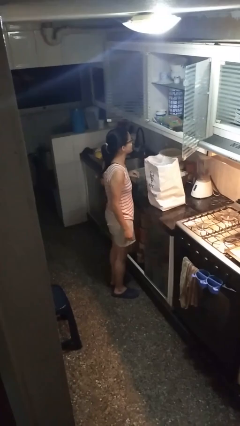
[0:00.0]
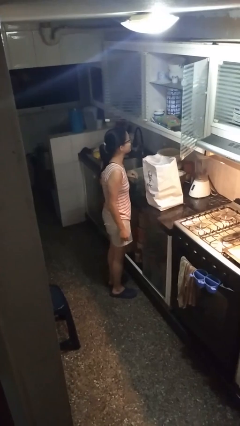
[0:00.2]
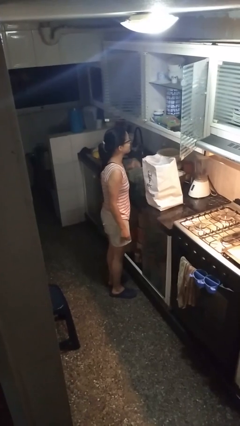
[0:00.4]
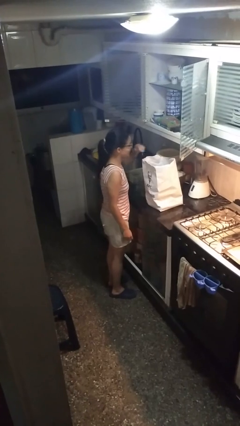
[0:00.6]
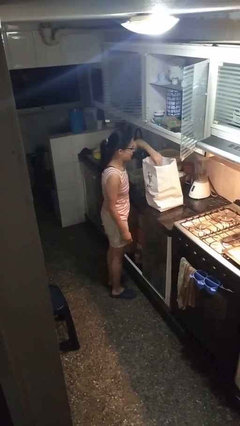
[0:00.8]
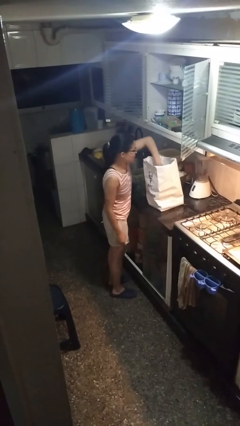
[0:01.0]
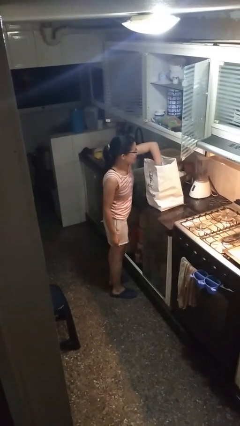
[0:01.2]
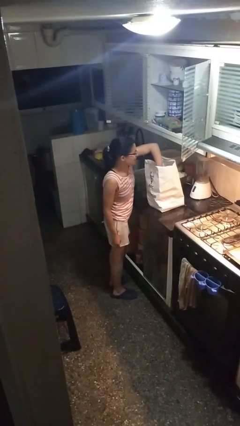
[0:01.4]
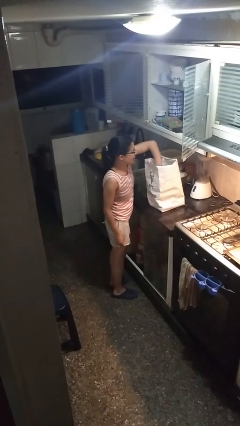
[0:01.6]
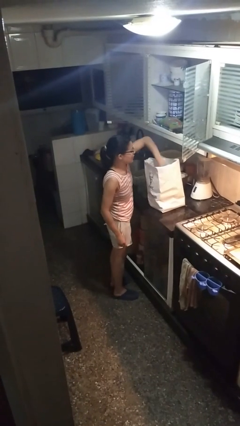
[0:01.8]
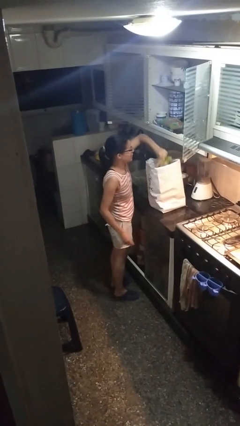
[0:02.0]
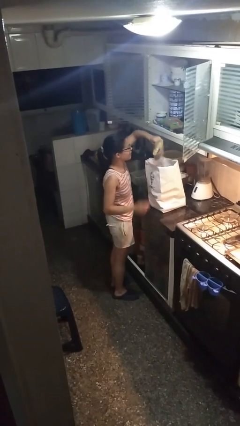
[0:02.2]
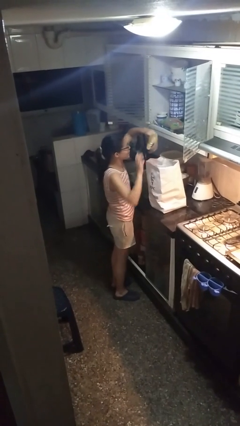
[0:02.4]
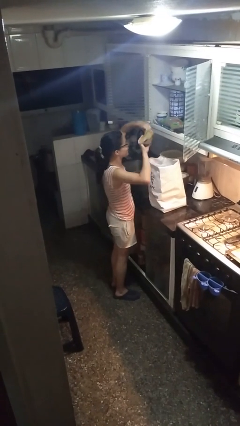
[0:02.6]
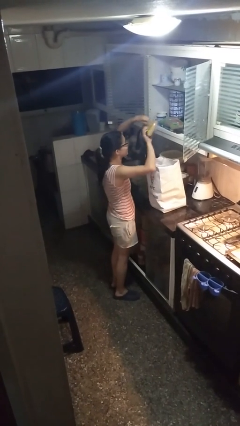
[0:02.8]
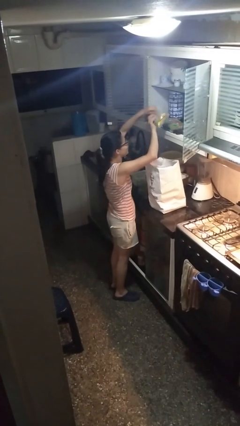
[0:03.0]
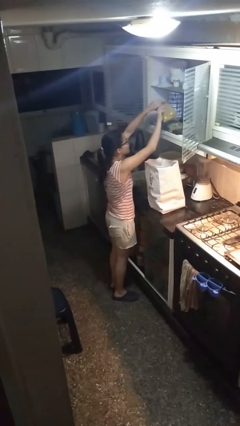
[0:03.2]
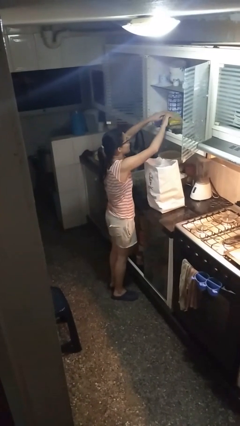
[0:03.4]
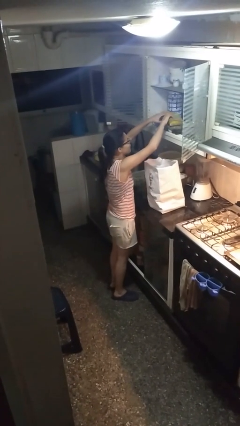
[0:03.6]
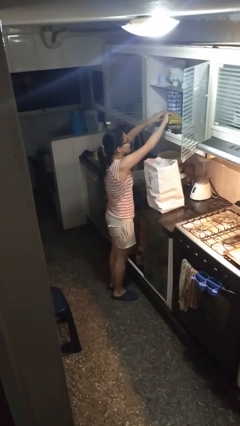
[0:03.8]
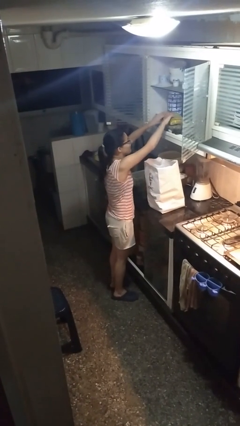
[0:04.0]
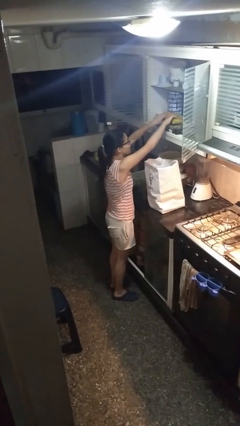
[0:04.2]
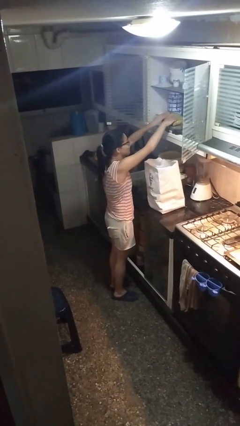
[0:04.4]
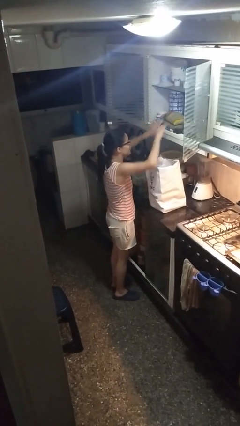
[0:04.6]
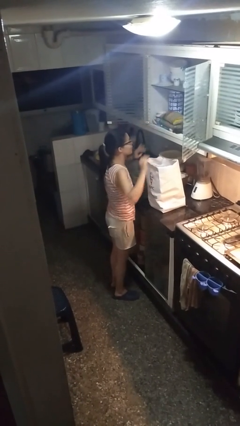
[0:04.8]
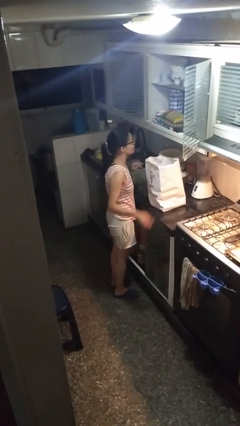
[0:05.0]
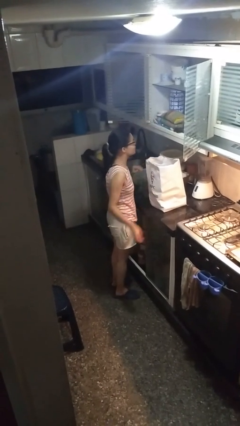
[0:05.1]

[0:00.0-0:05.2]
person loads groceries into cabinet

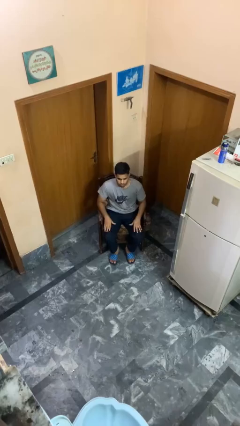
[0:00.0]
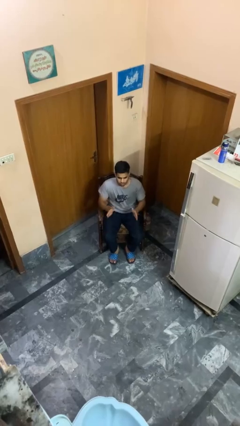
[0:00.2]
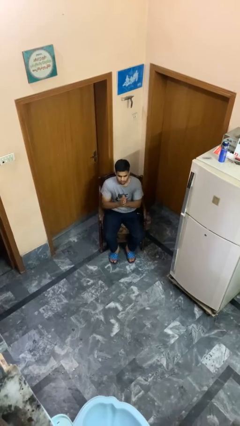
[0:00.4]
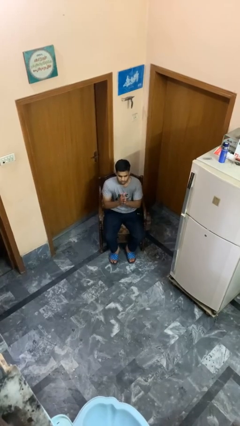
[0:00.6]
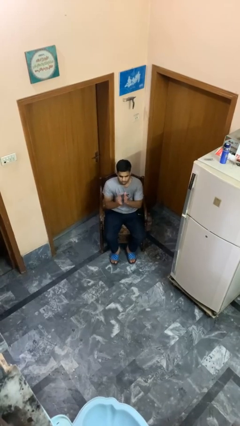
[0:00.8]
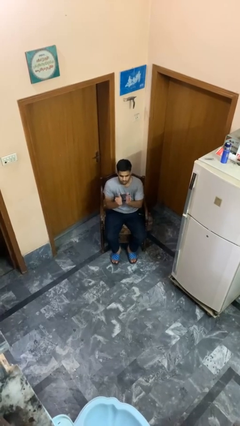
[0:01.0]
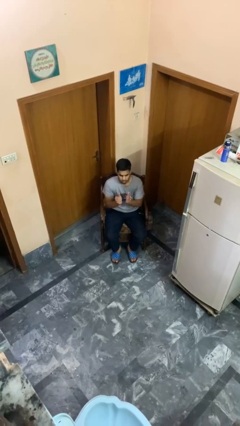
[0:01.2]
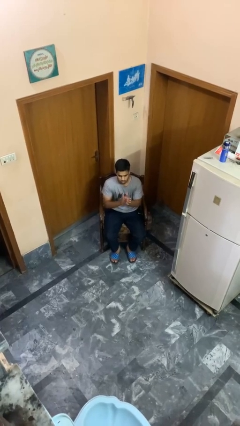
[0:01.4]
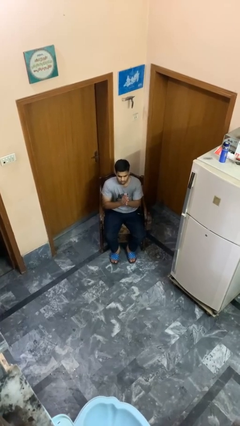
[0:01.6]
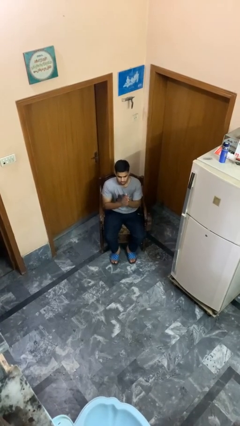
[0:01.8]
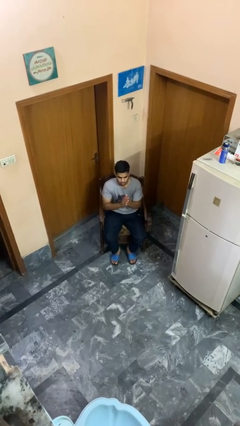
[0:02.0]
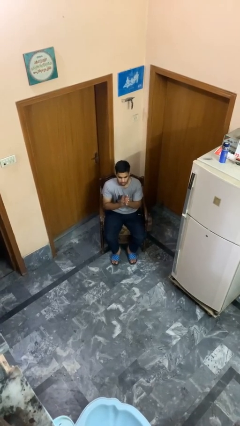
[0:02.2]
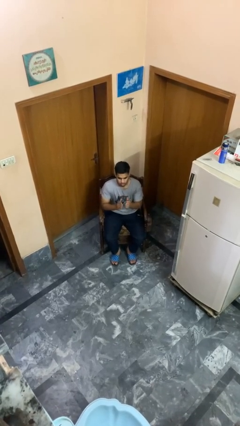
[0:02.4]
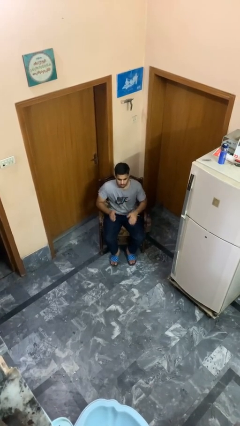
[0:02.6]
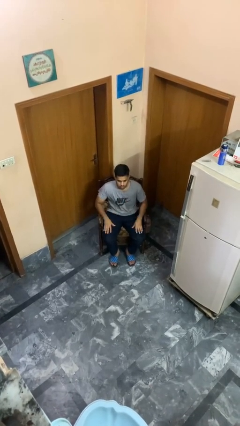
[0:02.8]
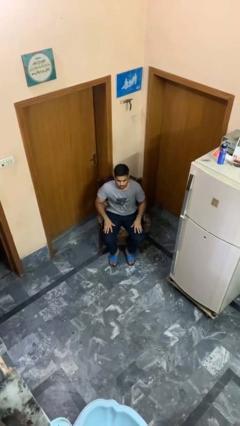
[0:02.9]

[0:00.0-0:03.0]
person claps hands

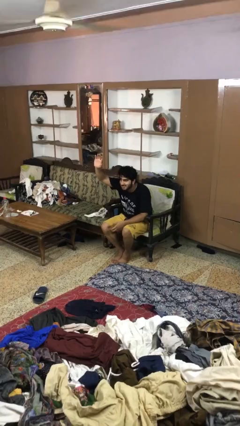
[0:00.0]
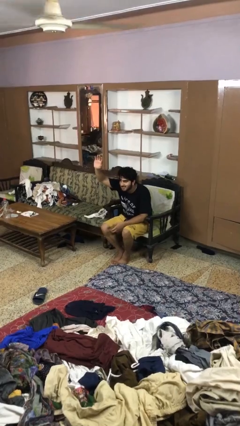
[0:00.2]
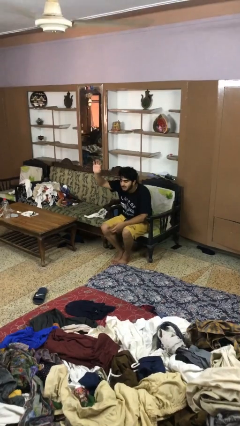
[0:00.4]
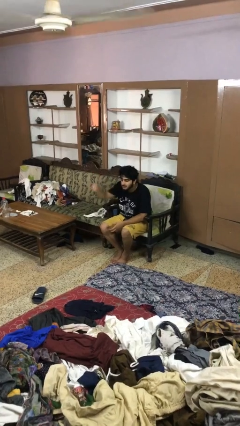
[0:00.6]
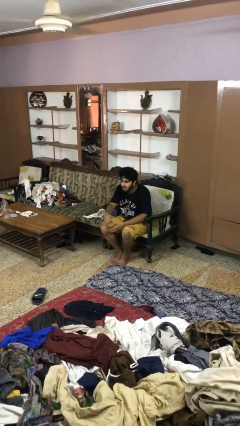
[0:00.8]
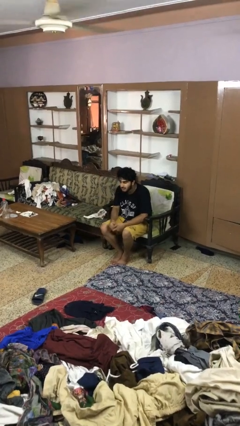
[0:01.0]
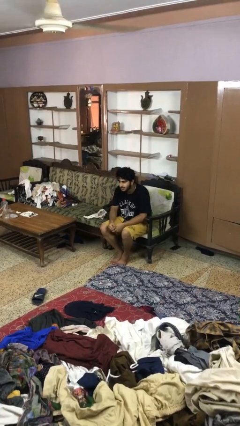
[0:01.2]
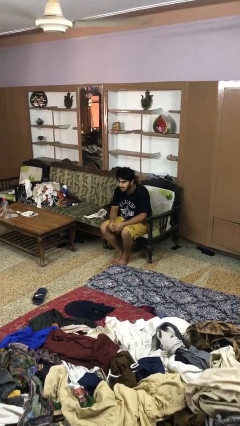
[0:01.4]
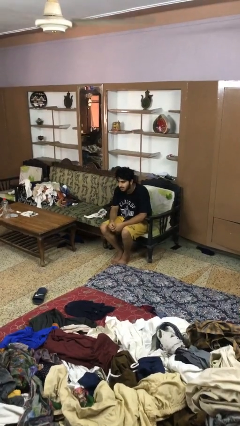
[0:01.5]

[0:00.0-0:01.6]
person gestures lower hand

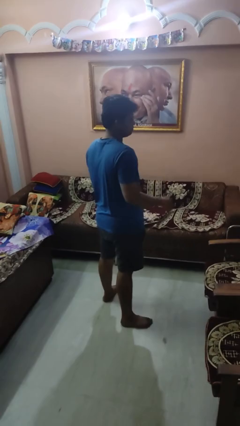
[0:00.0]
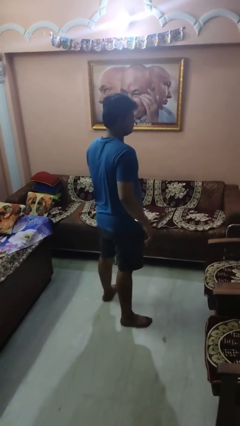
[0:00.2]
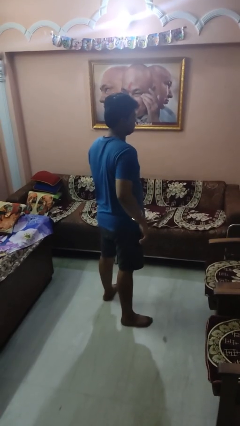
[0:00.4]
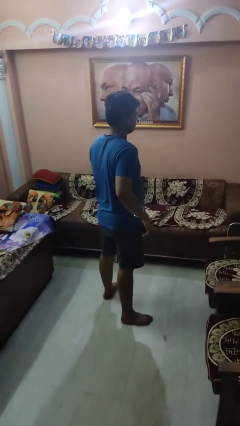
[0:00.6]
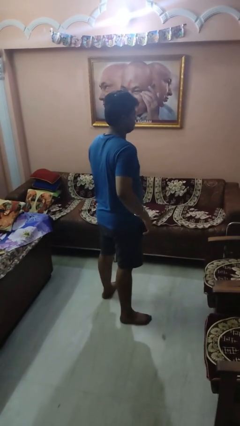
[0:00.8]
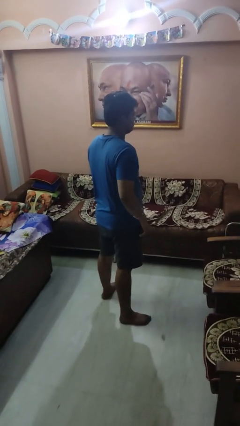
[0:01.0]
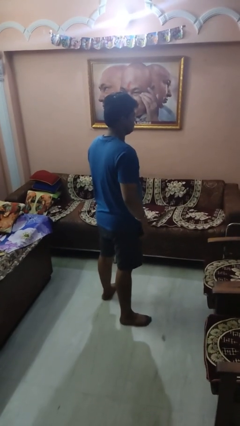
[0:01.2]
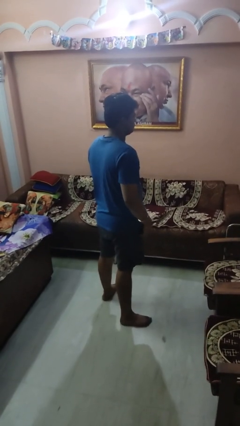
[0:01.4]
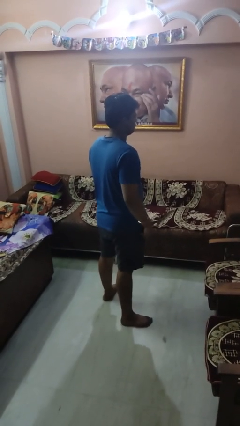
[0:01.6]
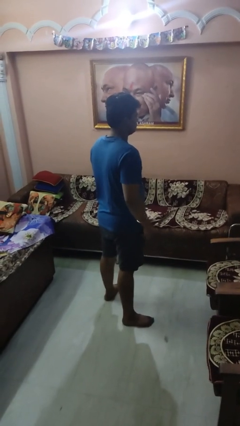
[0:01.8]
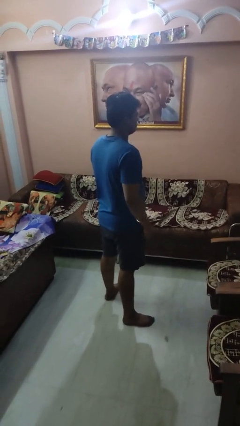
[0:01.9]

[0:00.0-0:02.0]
person puts phone into pocket

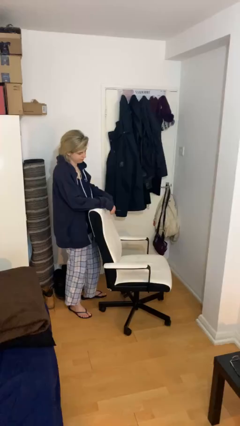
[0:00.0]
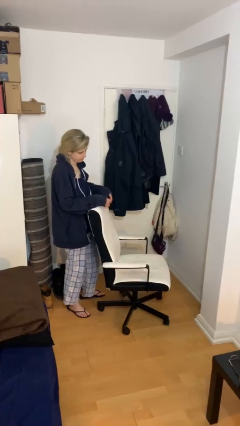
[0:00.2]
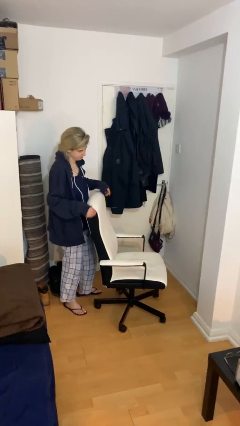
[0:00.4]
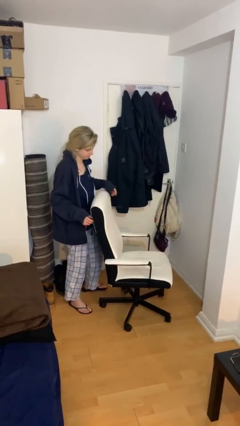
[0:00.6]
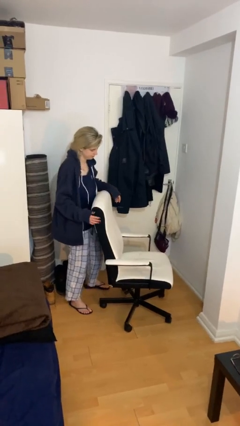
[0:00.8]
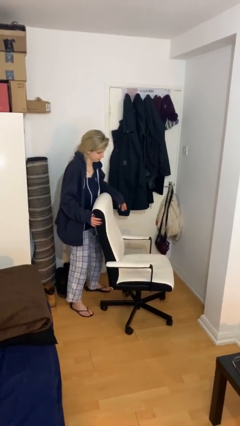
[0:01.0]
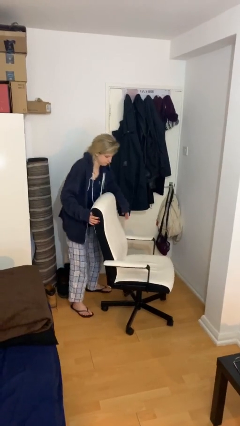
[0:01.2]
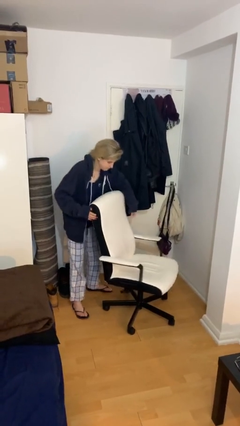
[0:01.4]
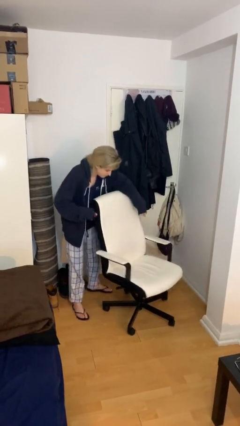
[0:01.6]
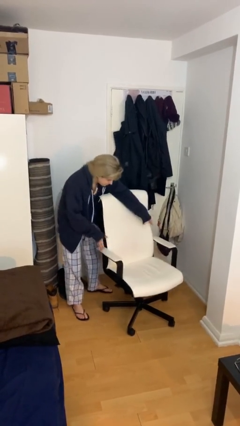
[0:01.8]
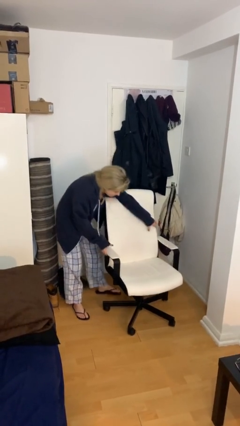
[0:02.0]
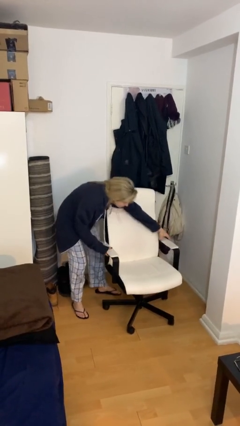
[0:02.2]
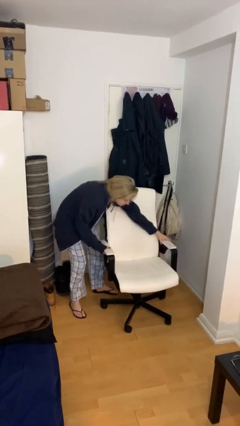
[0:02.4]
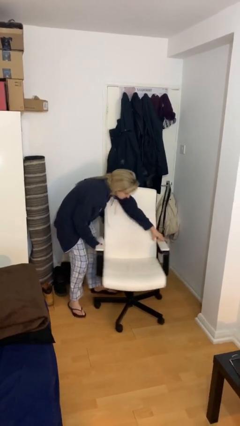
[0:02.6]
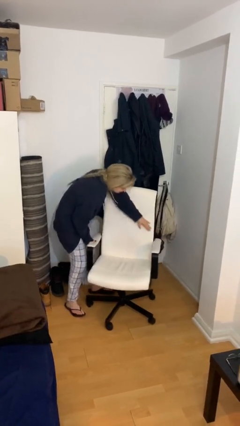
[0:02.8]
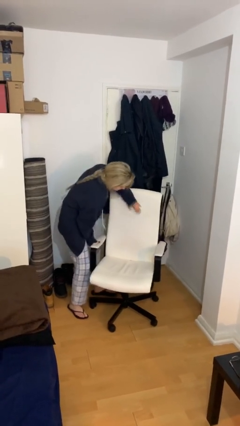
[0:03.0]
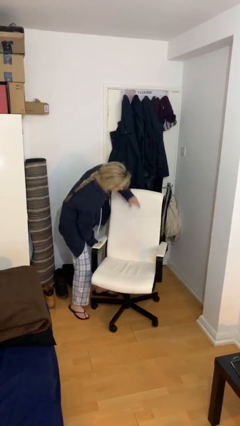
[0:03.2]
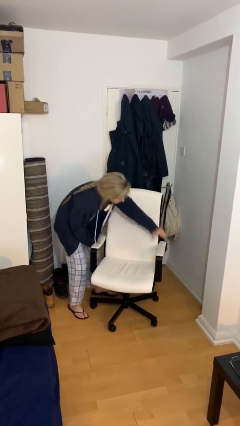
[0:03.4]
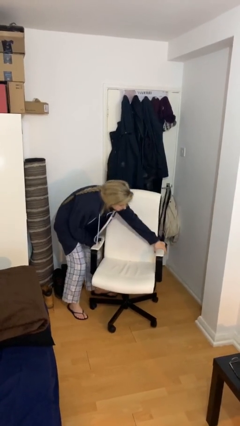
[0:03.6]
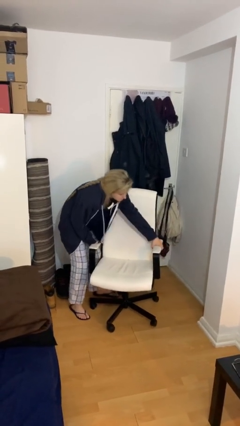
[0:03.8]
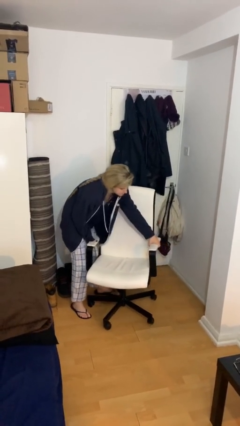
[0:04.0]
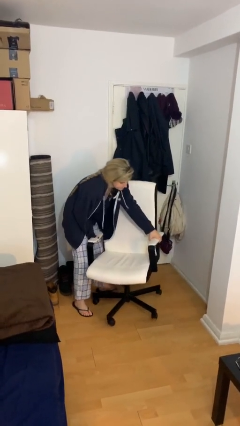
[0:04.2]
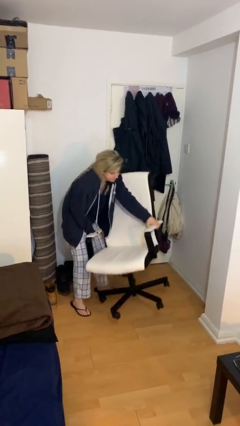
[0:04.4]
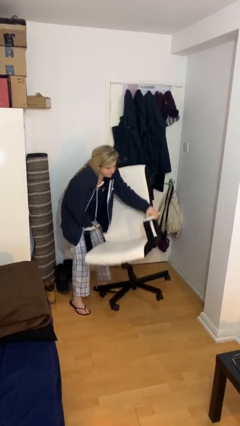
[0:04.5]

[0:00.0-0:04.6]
person picks up object from floor

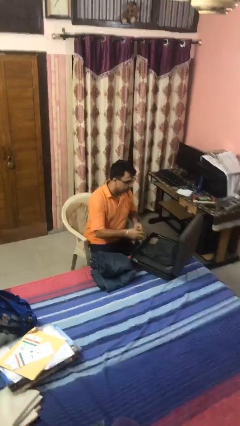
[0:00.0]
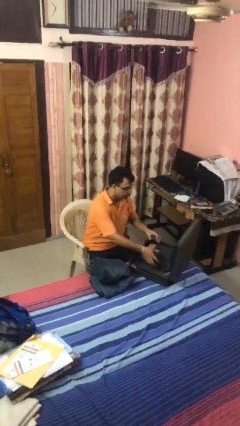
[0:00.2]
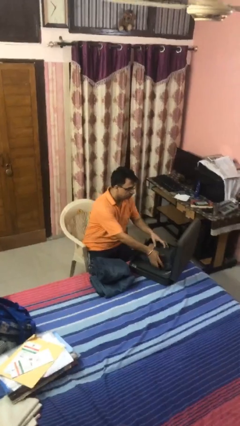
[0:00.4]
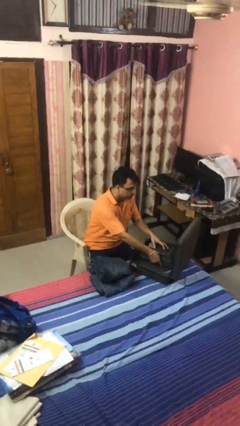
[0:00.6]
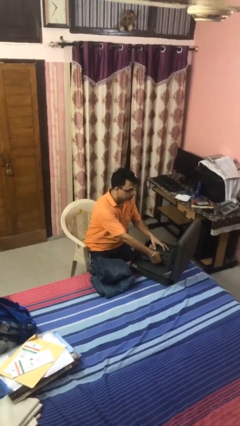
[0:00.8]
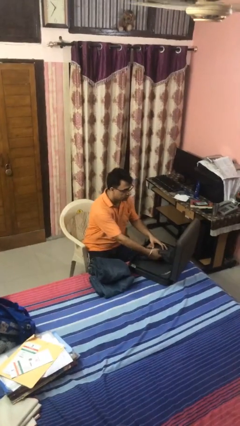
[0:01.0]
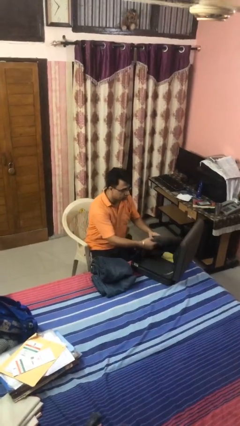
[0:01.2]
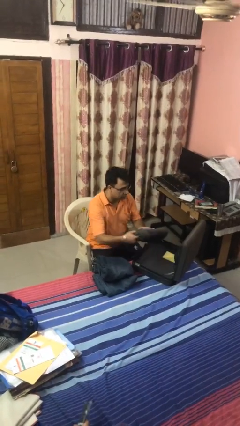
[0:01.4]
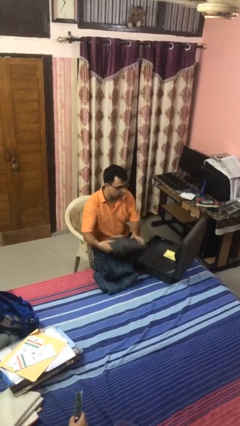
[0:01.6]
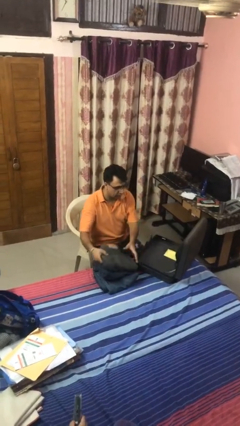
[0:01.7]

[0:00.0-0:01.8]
person unloads clothes from suitcase
